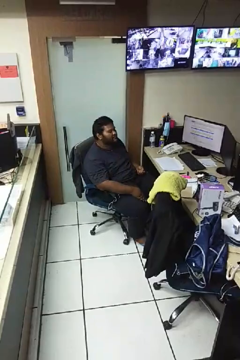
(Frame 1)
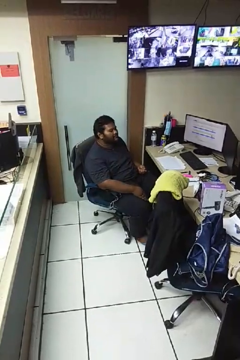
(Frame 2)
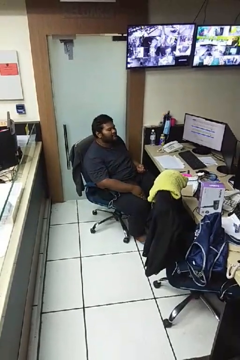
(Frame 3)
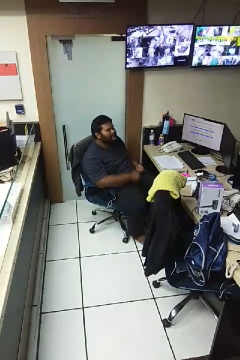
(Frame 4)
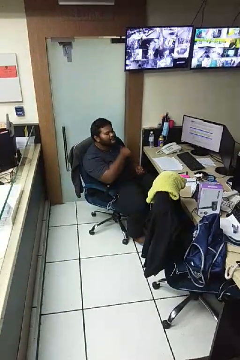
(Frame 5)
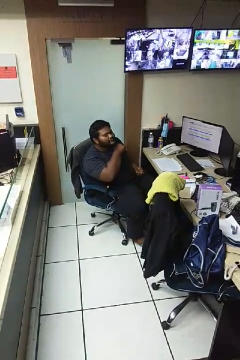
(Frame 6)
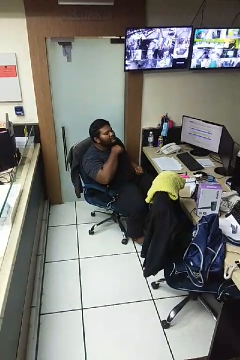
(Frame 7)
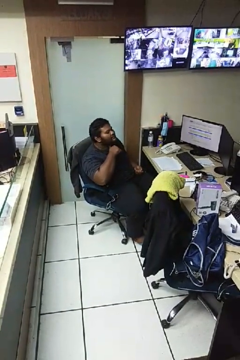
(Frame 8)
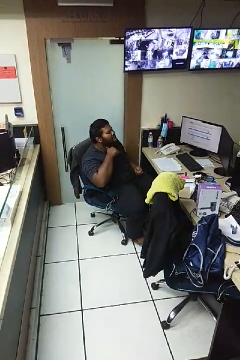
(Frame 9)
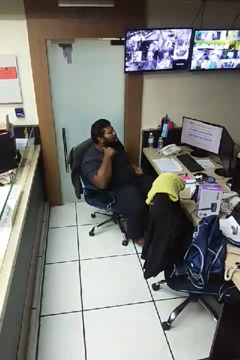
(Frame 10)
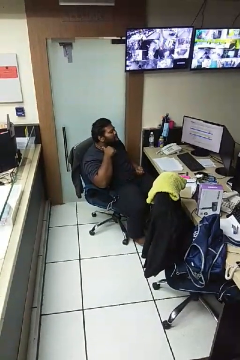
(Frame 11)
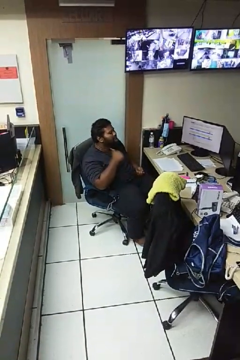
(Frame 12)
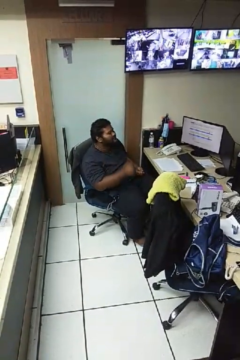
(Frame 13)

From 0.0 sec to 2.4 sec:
person gestures cut

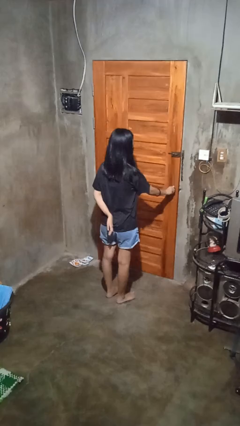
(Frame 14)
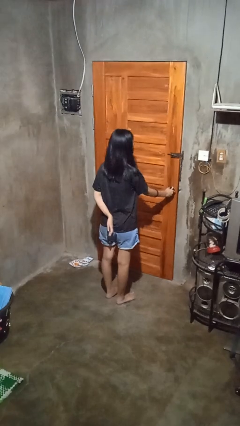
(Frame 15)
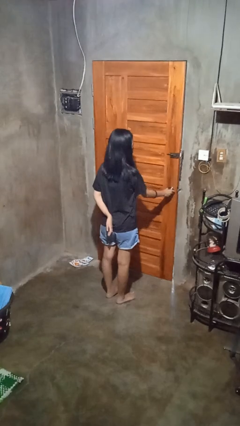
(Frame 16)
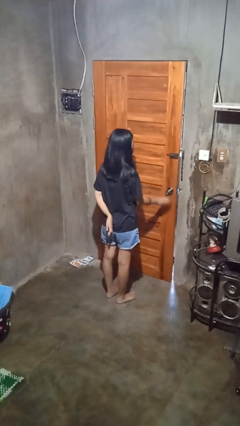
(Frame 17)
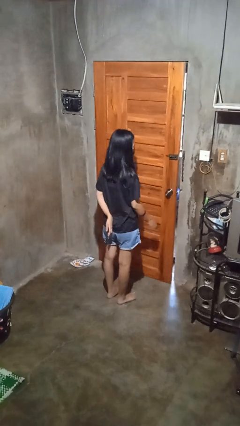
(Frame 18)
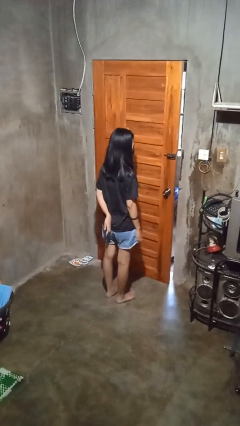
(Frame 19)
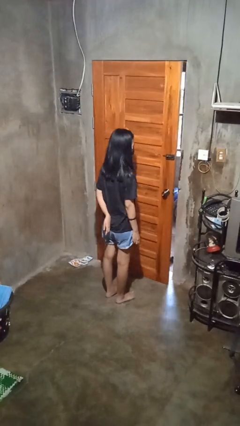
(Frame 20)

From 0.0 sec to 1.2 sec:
person opens facility door

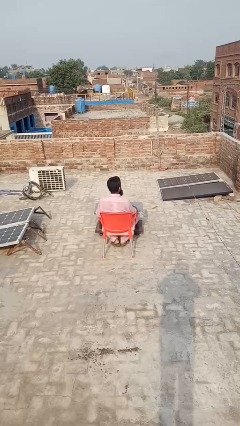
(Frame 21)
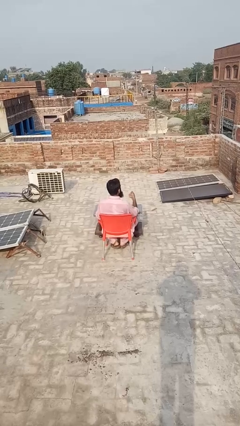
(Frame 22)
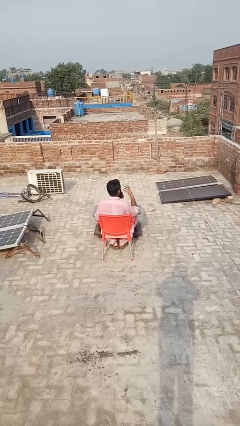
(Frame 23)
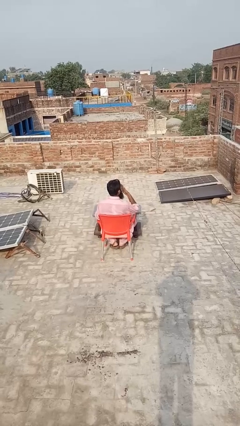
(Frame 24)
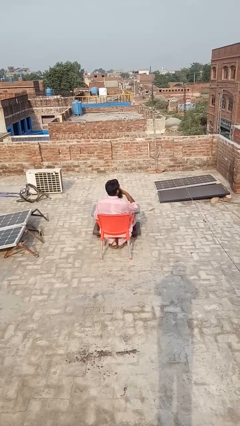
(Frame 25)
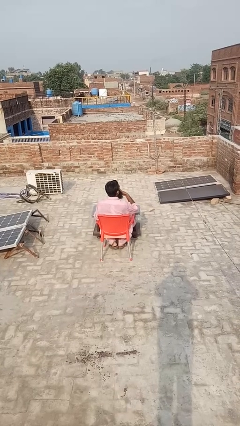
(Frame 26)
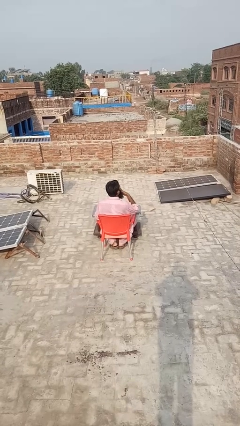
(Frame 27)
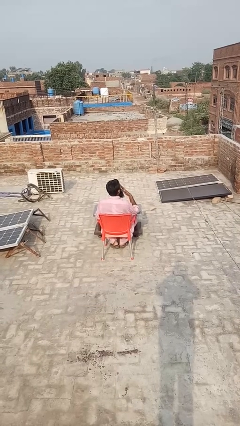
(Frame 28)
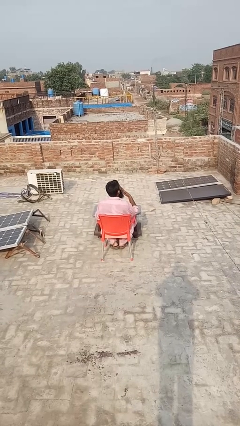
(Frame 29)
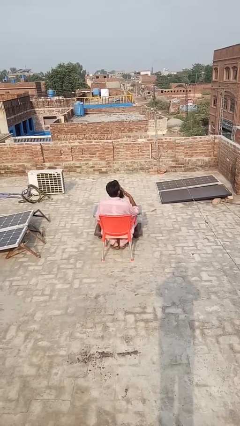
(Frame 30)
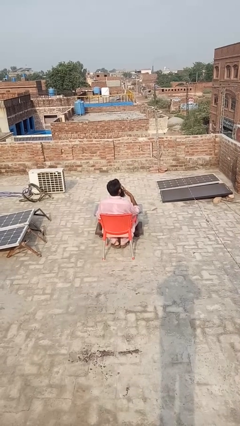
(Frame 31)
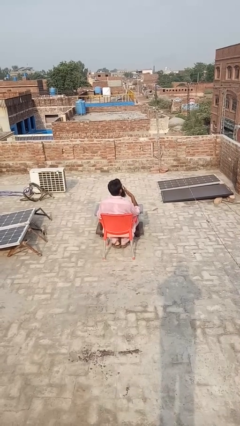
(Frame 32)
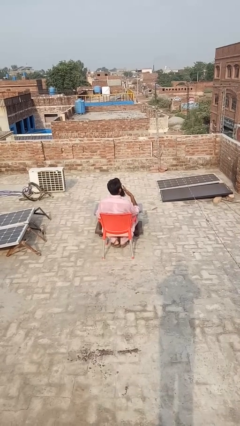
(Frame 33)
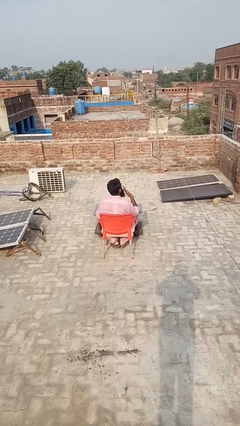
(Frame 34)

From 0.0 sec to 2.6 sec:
person licks fingers

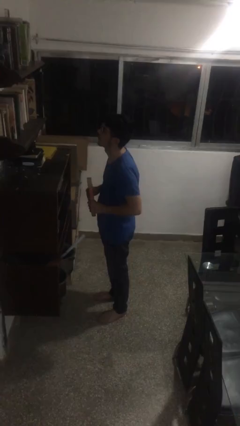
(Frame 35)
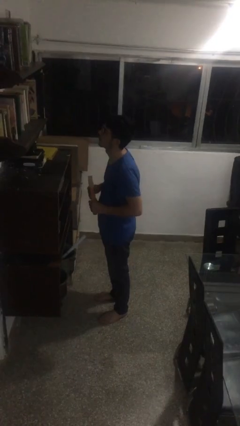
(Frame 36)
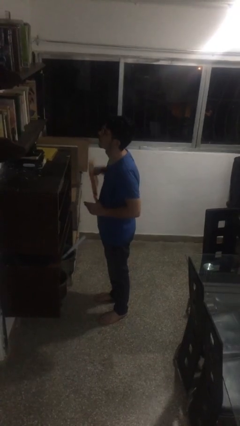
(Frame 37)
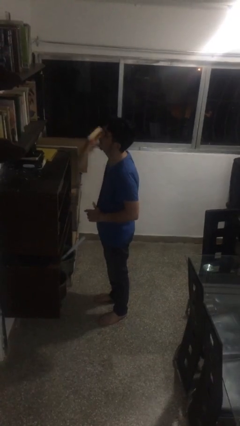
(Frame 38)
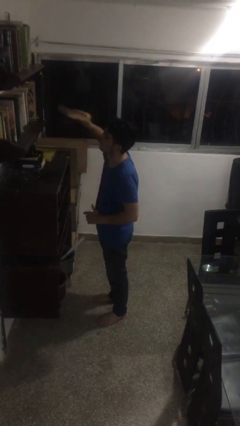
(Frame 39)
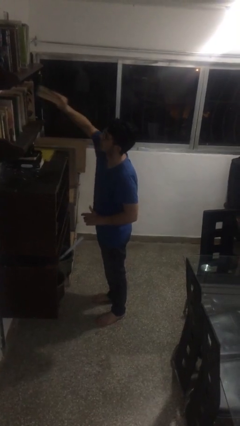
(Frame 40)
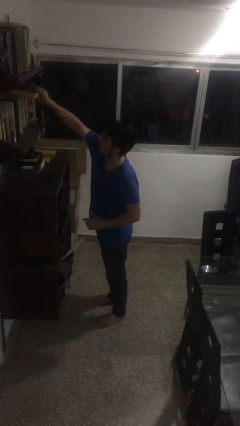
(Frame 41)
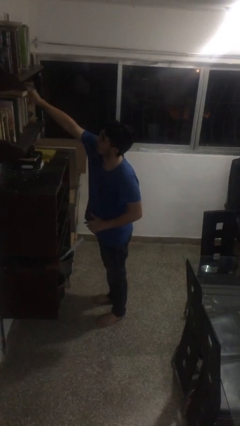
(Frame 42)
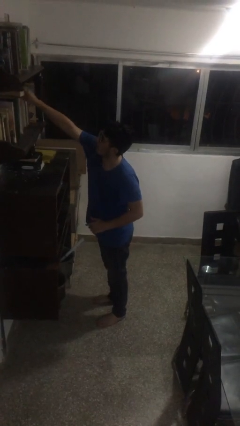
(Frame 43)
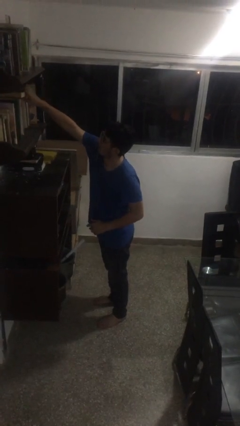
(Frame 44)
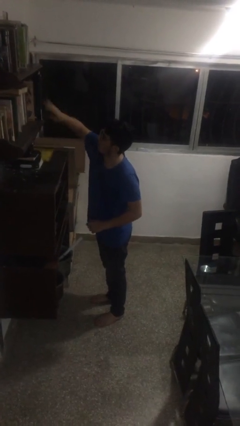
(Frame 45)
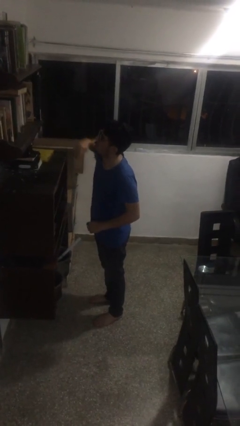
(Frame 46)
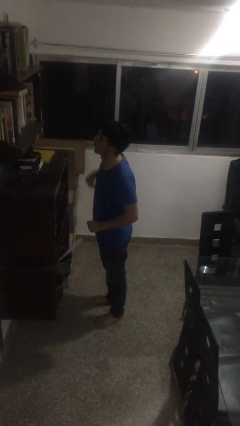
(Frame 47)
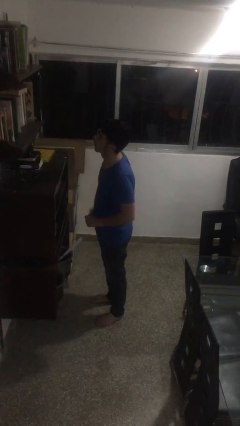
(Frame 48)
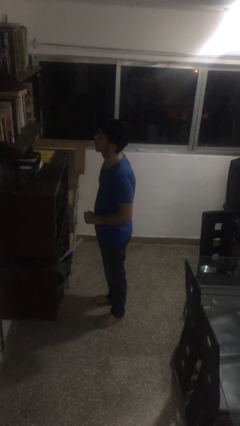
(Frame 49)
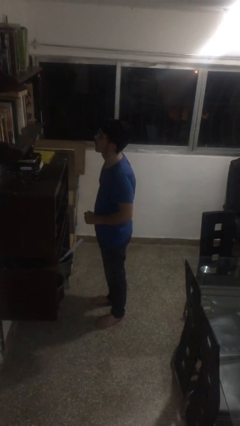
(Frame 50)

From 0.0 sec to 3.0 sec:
person puts down object on shelf

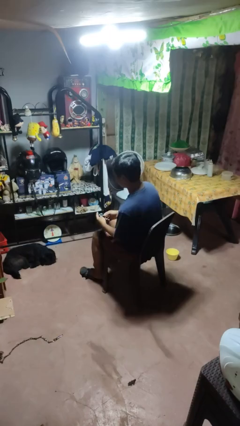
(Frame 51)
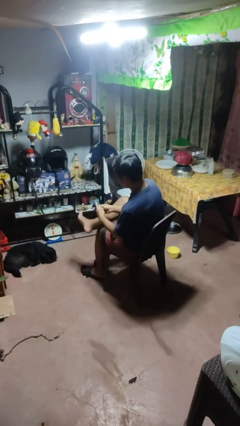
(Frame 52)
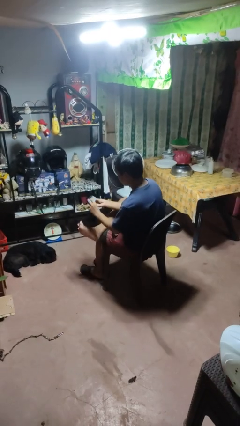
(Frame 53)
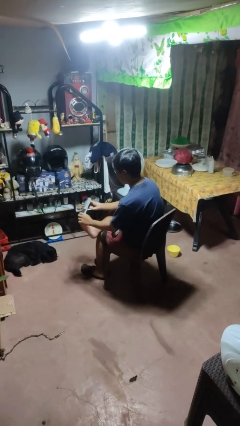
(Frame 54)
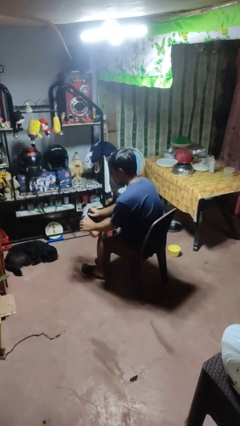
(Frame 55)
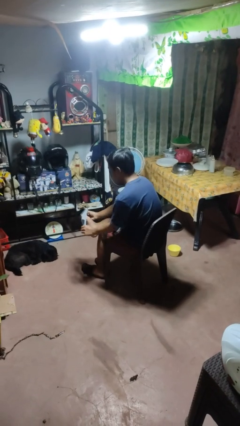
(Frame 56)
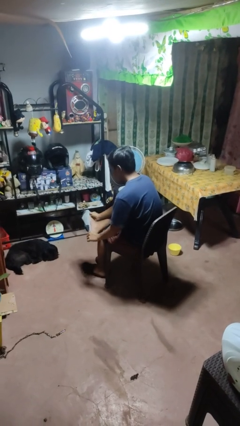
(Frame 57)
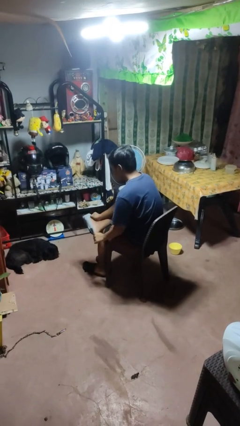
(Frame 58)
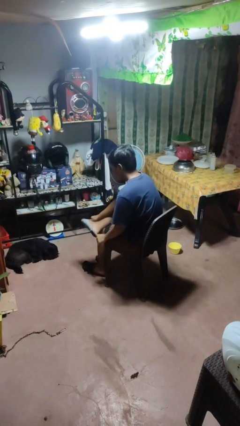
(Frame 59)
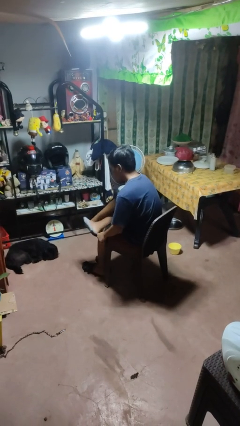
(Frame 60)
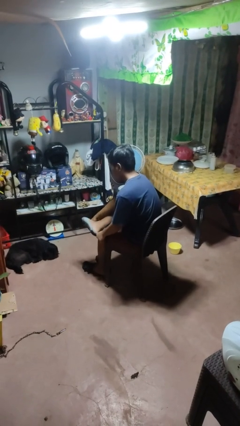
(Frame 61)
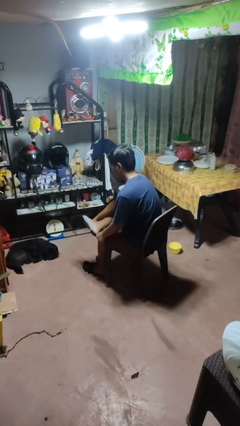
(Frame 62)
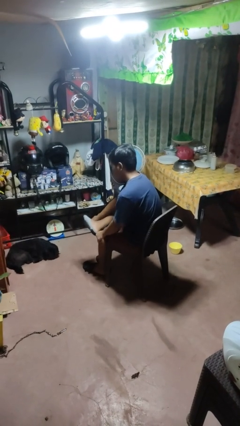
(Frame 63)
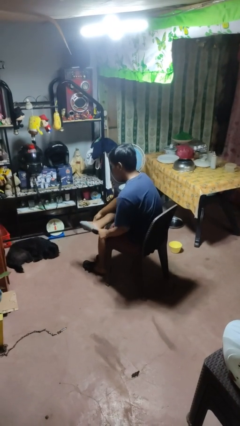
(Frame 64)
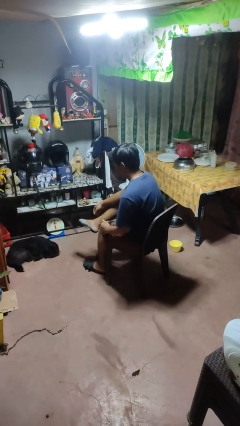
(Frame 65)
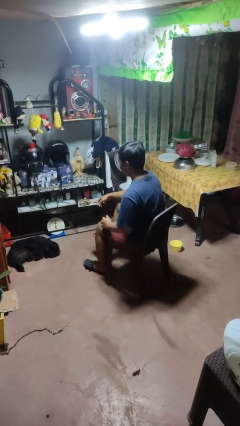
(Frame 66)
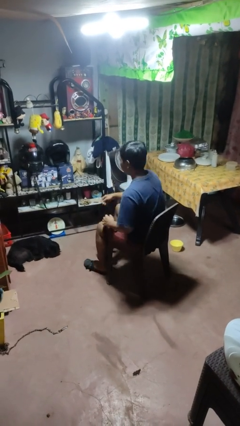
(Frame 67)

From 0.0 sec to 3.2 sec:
person puts on socks

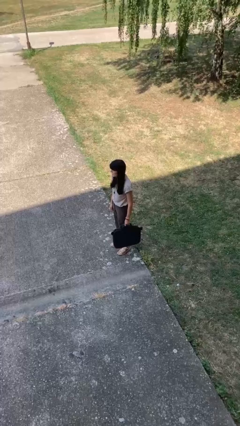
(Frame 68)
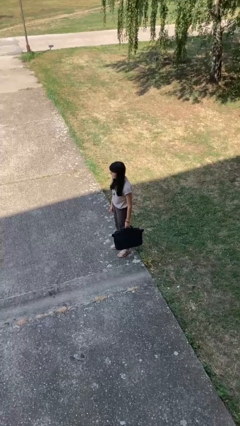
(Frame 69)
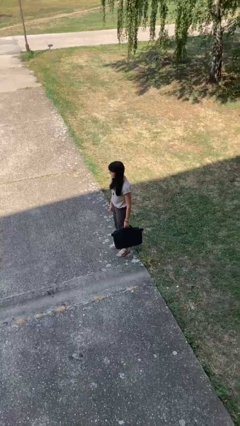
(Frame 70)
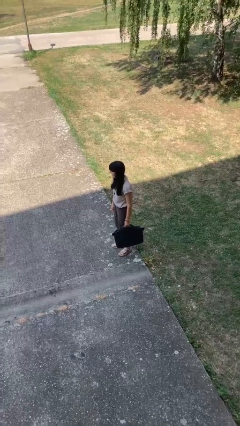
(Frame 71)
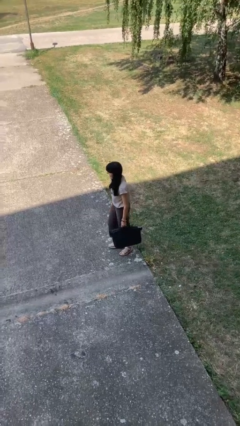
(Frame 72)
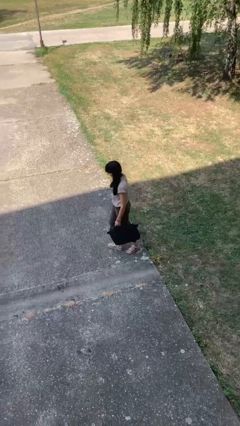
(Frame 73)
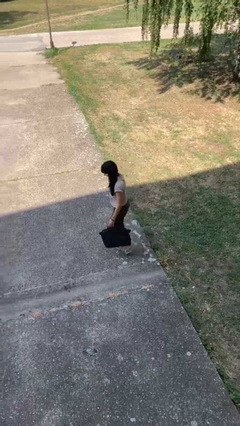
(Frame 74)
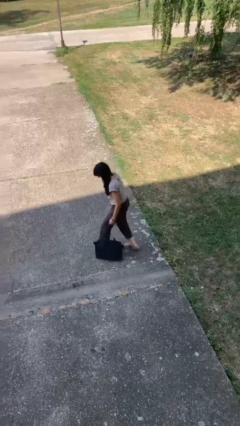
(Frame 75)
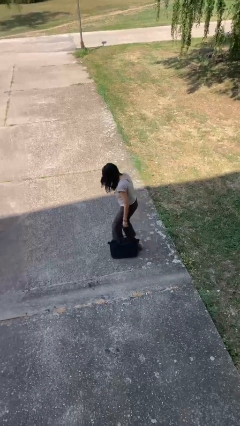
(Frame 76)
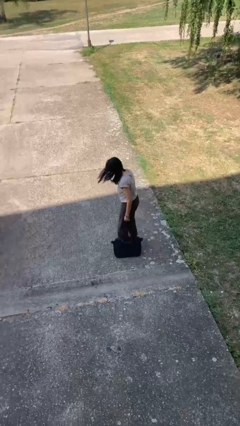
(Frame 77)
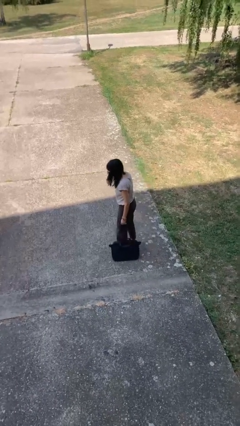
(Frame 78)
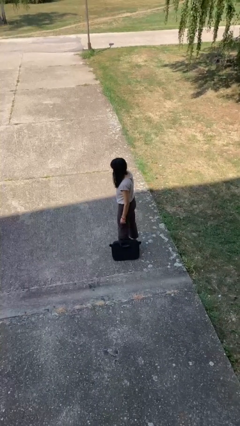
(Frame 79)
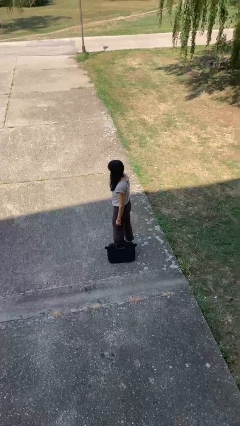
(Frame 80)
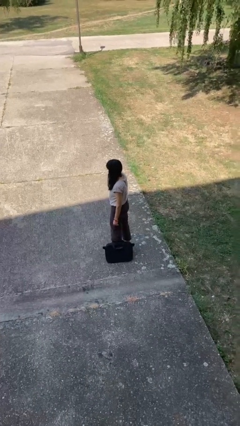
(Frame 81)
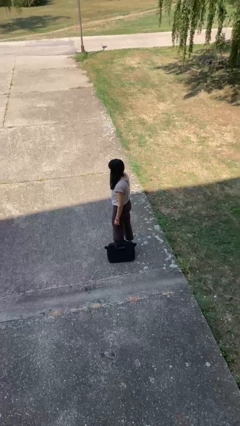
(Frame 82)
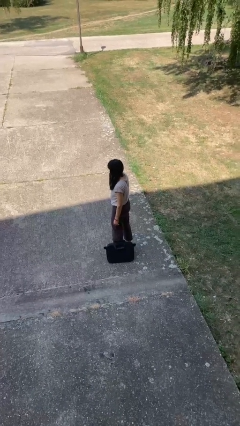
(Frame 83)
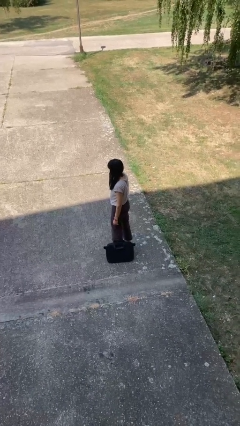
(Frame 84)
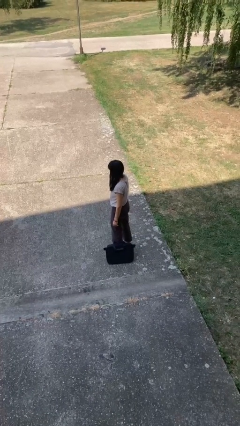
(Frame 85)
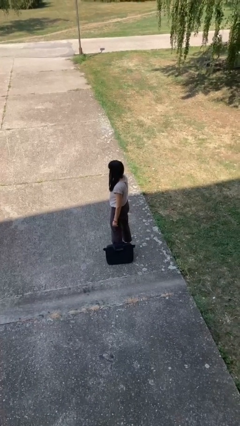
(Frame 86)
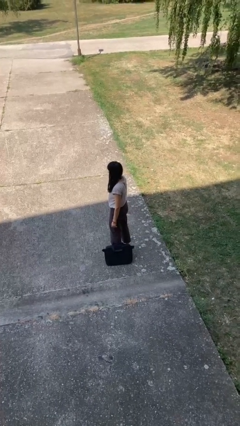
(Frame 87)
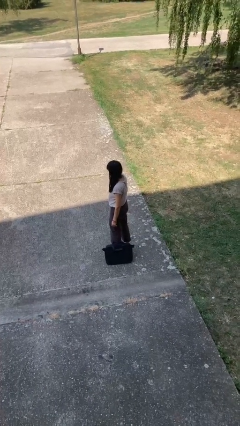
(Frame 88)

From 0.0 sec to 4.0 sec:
person drops object

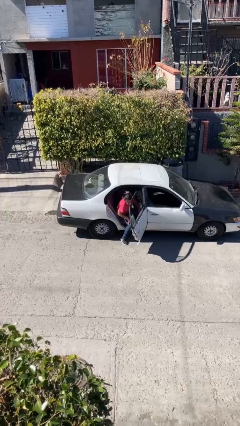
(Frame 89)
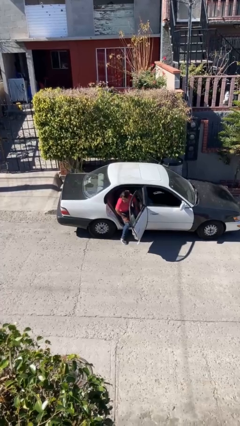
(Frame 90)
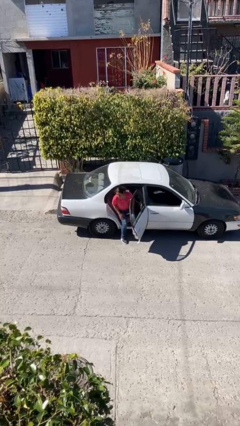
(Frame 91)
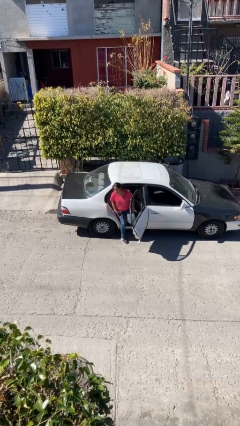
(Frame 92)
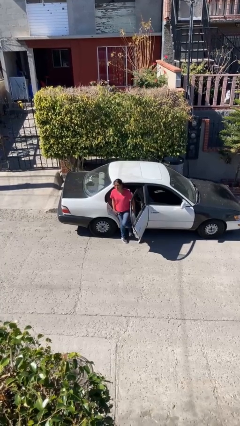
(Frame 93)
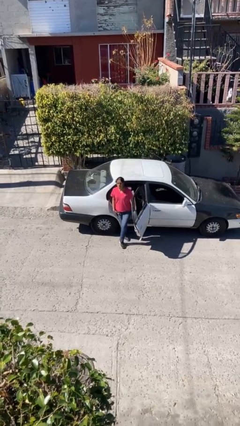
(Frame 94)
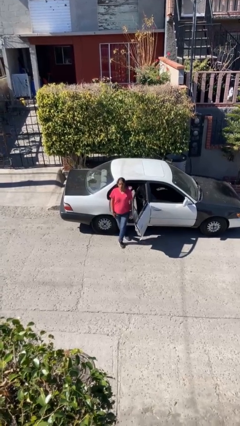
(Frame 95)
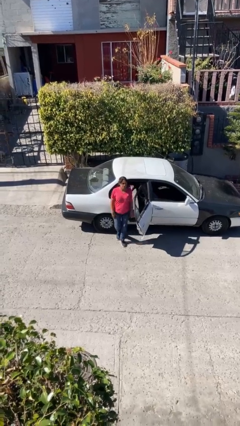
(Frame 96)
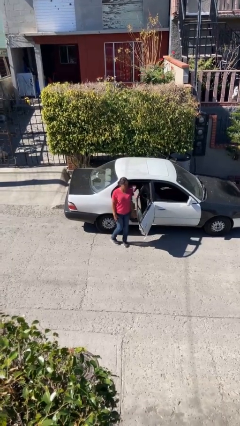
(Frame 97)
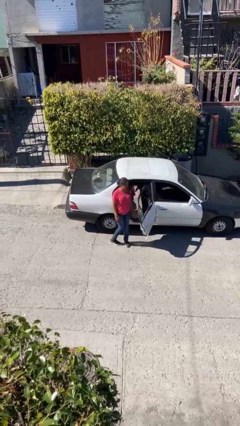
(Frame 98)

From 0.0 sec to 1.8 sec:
person exits car
